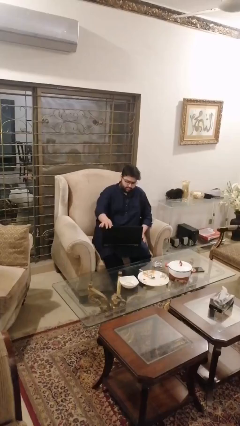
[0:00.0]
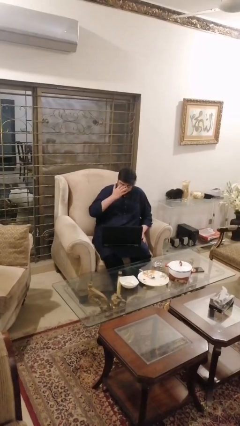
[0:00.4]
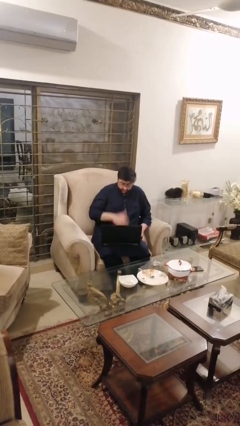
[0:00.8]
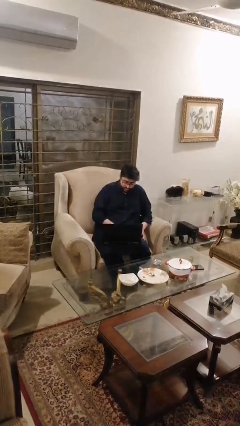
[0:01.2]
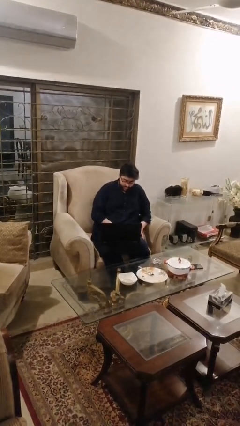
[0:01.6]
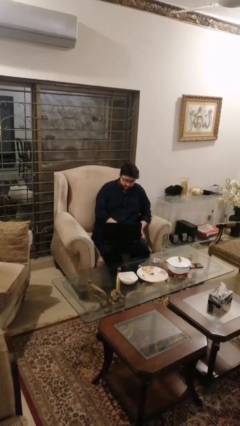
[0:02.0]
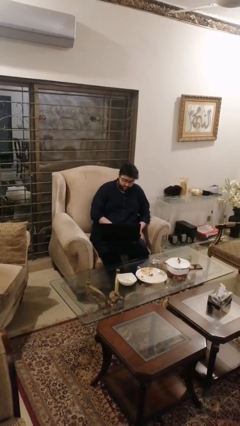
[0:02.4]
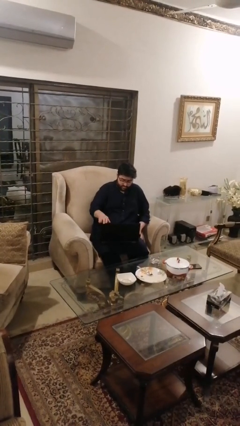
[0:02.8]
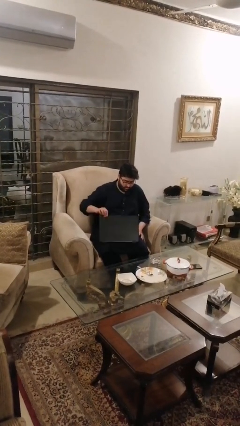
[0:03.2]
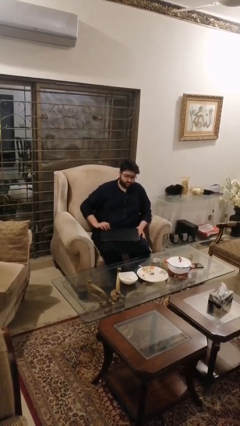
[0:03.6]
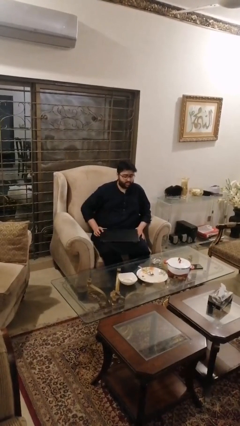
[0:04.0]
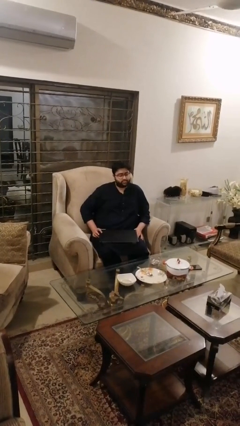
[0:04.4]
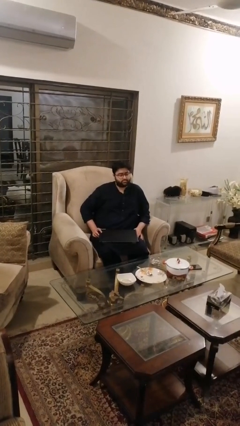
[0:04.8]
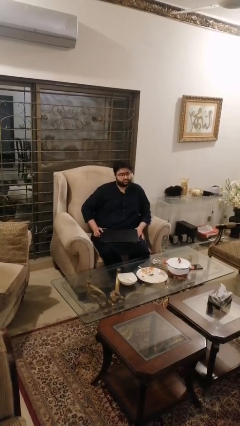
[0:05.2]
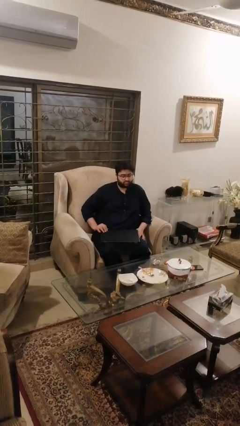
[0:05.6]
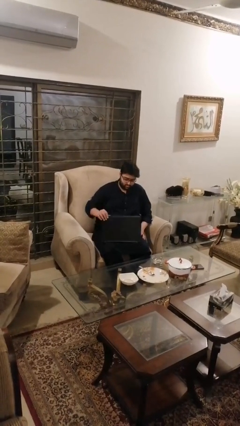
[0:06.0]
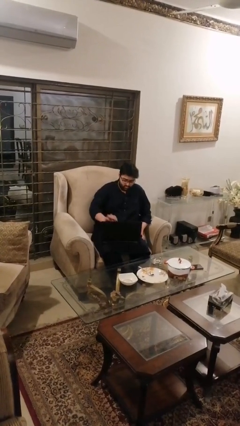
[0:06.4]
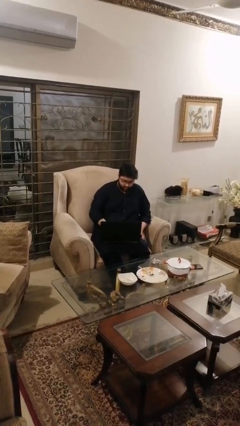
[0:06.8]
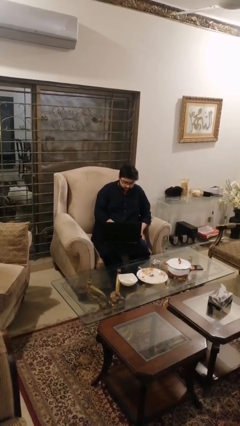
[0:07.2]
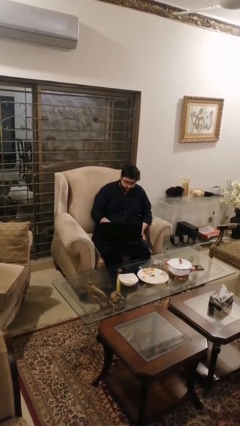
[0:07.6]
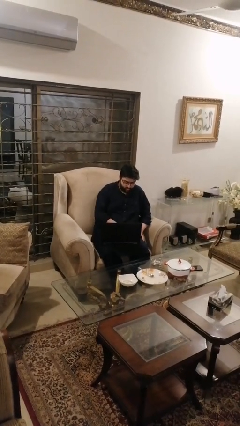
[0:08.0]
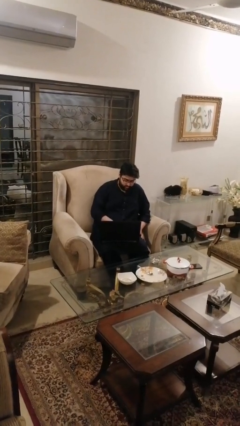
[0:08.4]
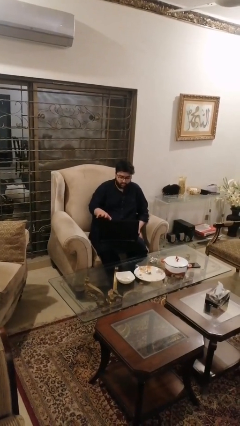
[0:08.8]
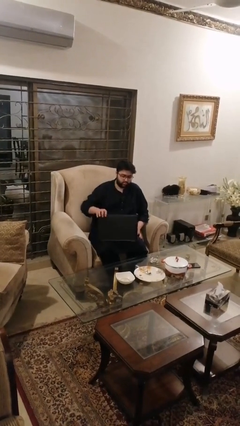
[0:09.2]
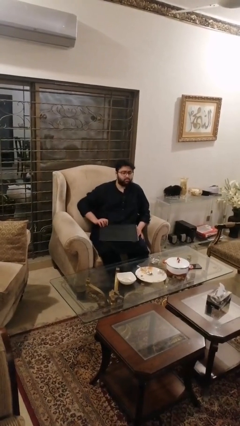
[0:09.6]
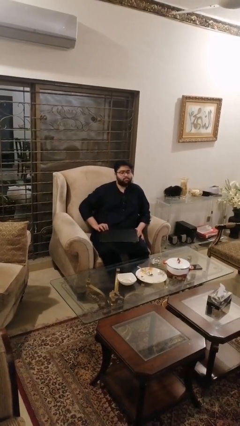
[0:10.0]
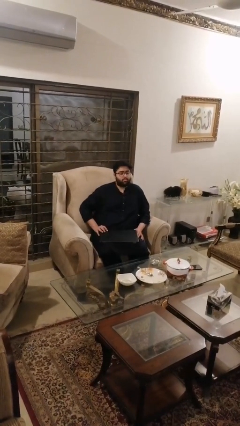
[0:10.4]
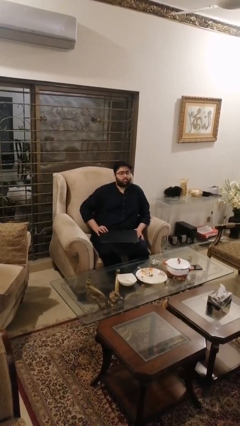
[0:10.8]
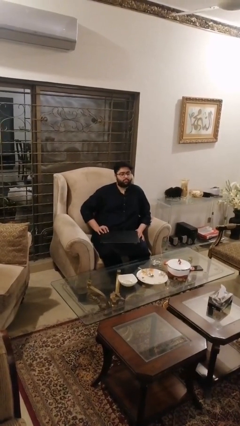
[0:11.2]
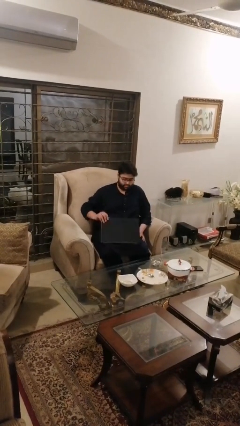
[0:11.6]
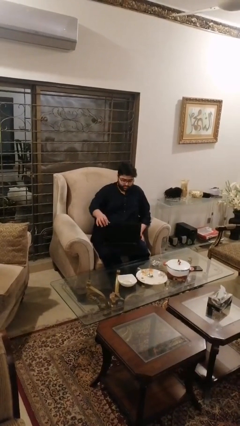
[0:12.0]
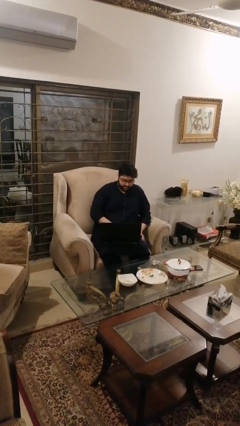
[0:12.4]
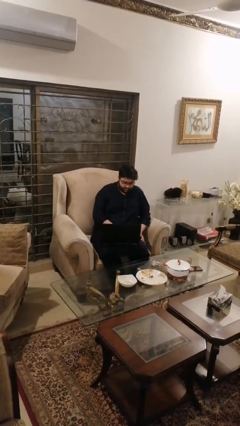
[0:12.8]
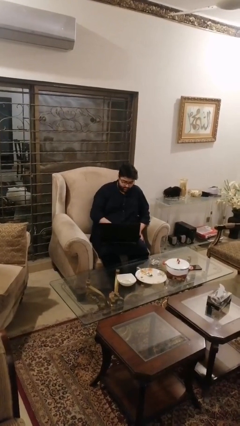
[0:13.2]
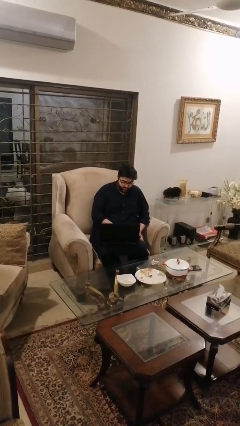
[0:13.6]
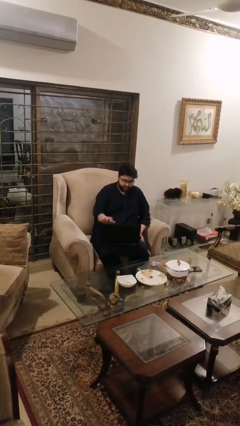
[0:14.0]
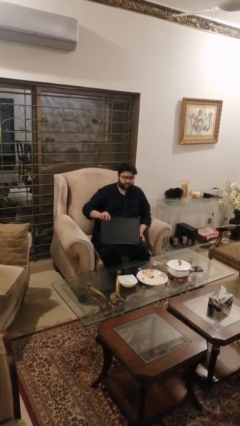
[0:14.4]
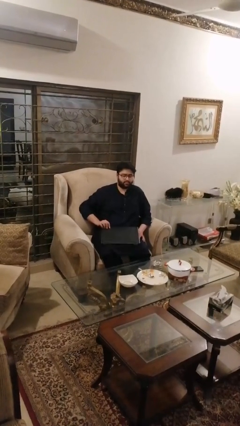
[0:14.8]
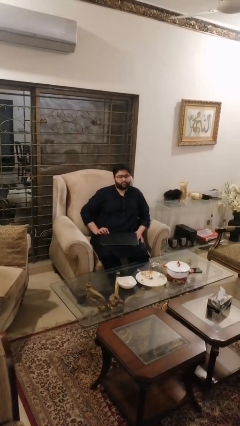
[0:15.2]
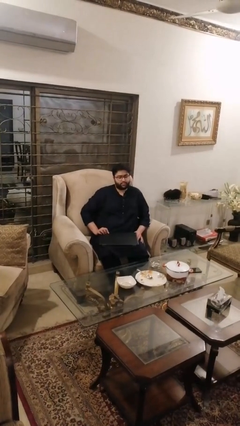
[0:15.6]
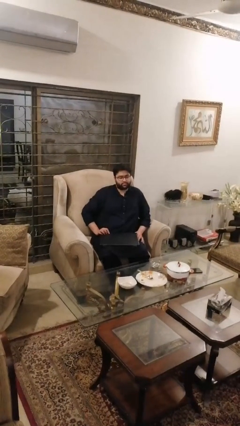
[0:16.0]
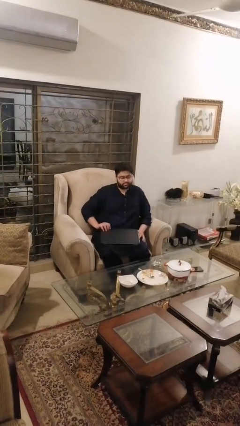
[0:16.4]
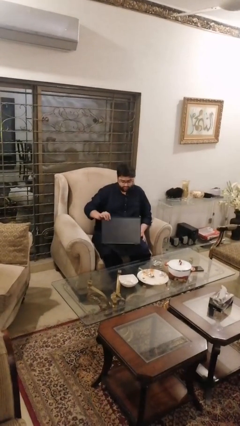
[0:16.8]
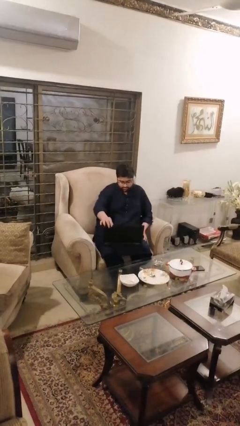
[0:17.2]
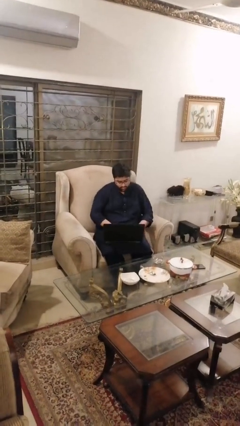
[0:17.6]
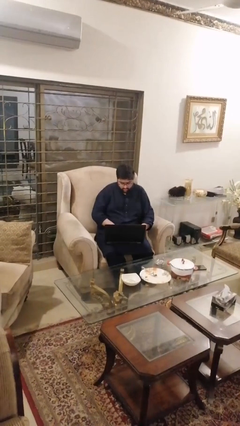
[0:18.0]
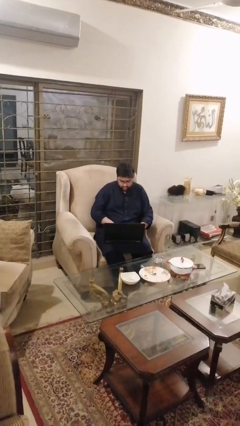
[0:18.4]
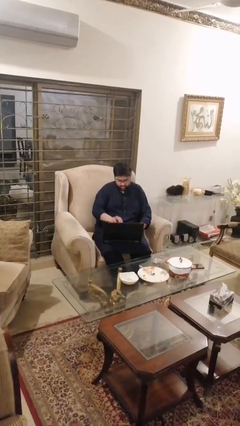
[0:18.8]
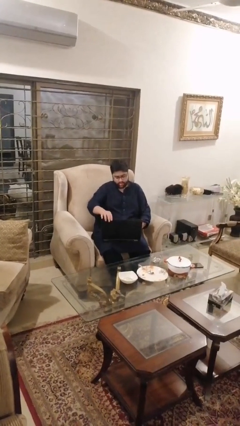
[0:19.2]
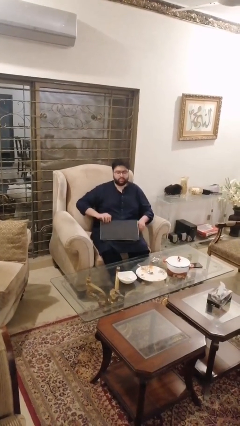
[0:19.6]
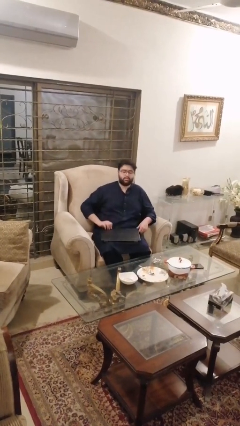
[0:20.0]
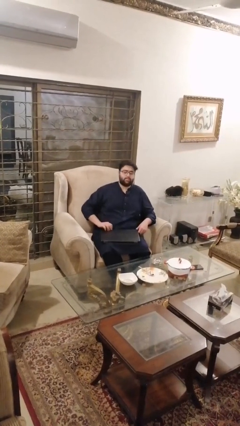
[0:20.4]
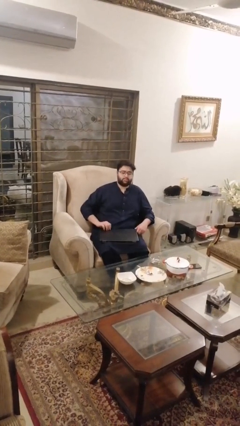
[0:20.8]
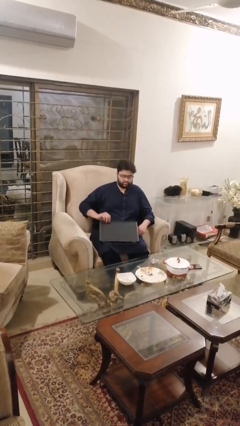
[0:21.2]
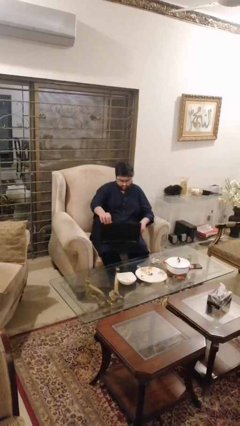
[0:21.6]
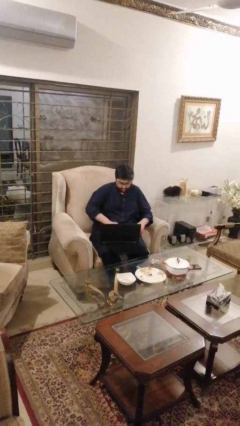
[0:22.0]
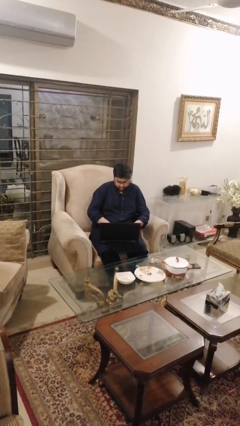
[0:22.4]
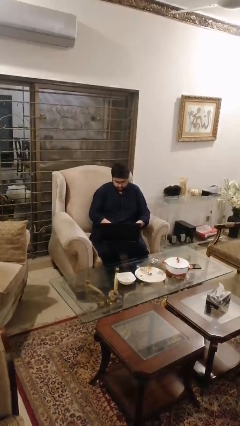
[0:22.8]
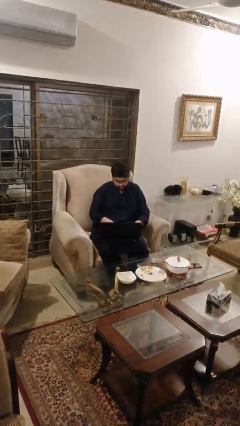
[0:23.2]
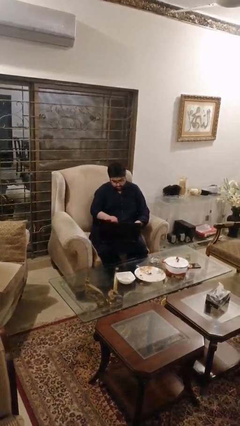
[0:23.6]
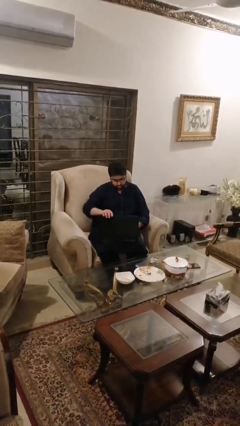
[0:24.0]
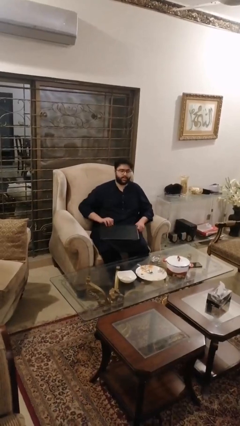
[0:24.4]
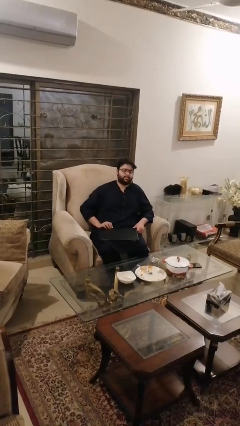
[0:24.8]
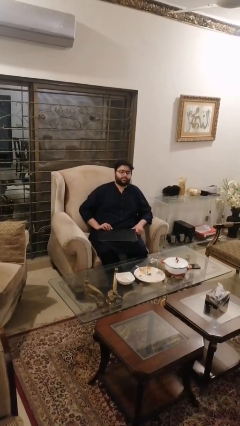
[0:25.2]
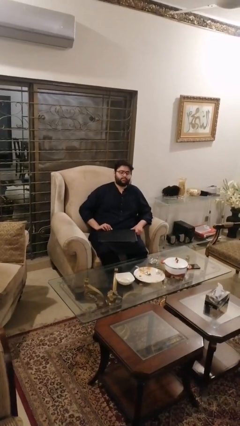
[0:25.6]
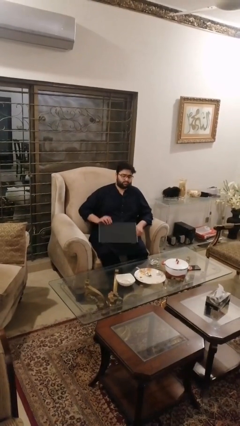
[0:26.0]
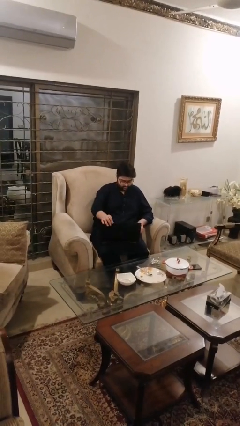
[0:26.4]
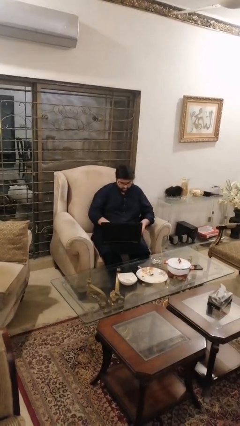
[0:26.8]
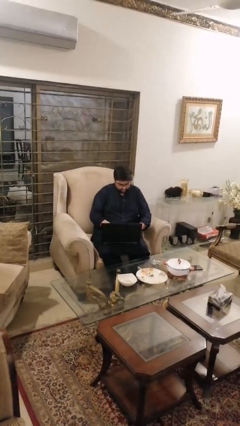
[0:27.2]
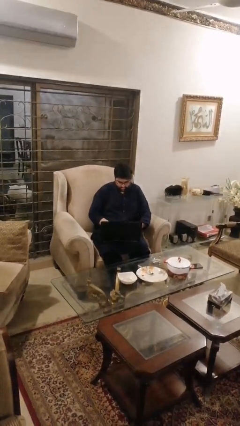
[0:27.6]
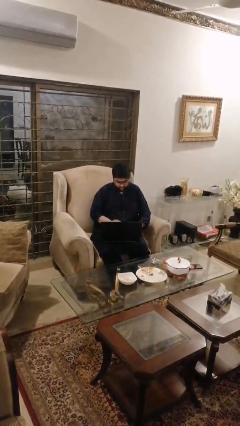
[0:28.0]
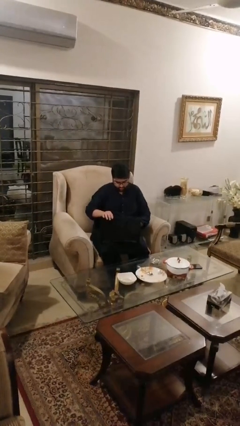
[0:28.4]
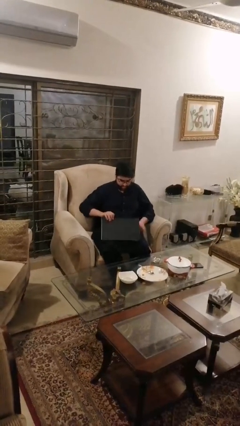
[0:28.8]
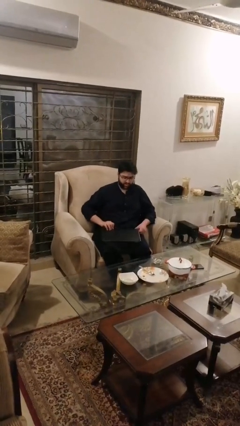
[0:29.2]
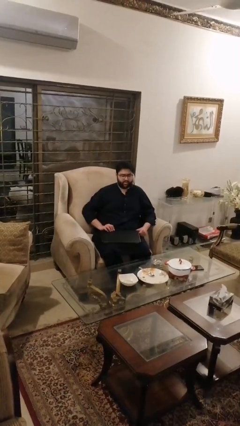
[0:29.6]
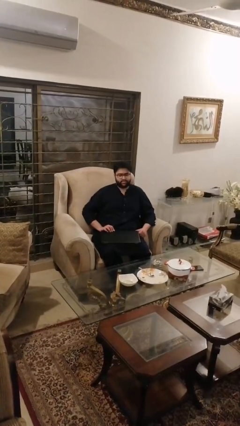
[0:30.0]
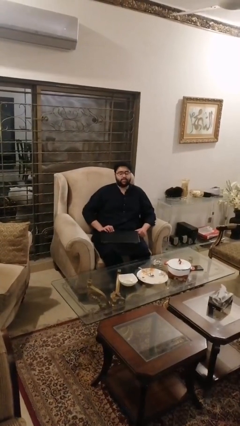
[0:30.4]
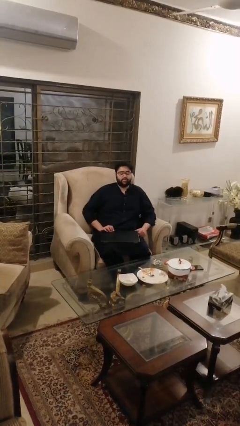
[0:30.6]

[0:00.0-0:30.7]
person interacts with laptop

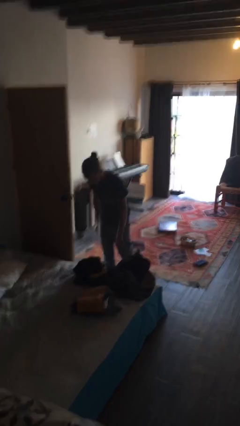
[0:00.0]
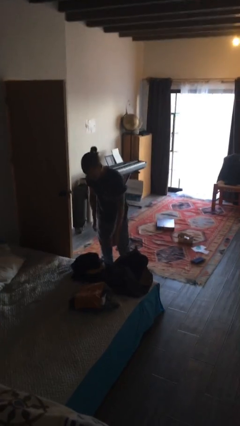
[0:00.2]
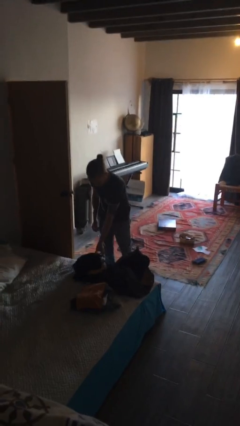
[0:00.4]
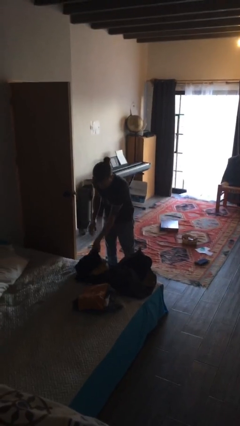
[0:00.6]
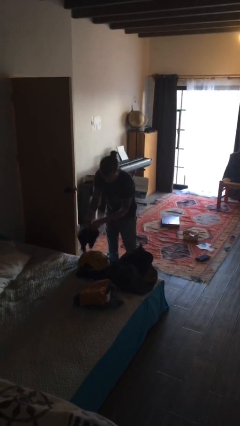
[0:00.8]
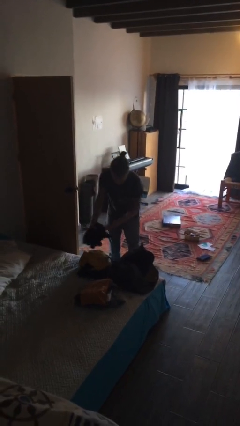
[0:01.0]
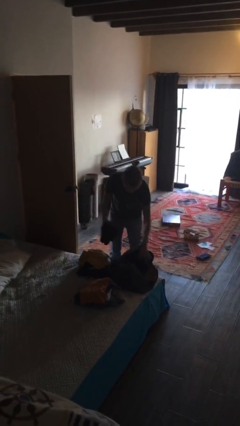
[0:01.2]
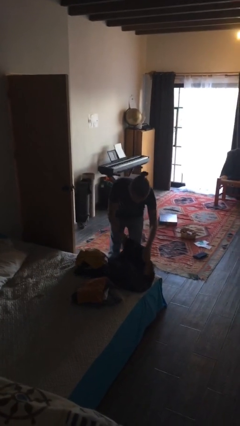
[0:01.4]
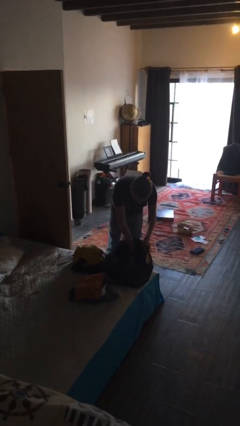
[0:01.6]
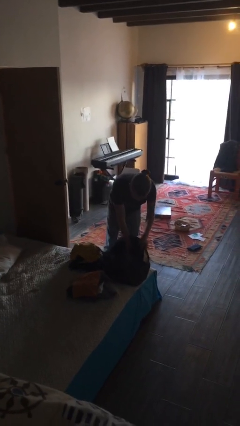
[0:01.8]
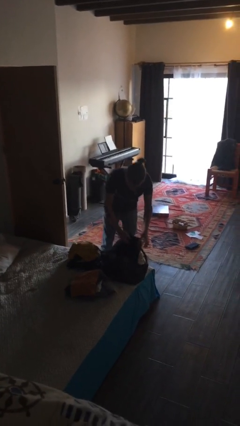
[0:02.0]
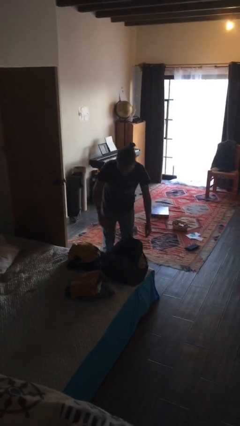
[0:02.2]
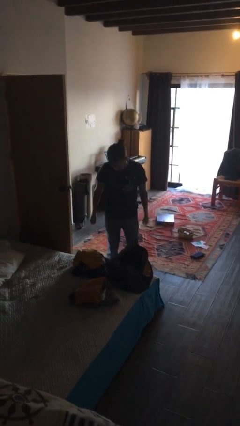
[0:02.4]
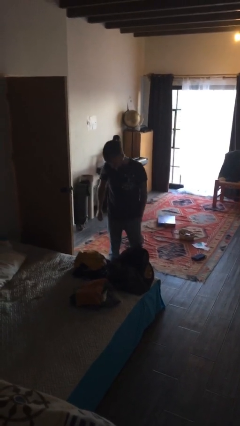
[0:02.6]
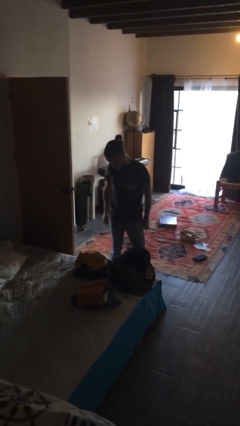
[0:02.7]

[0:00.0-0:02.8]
person loads clothes into suitcase

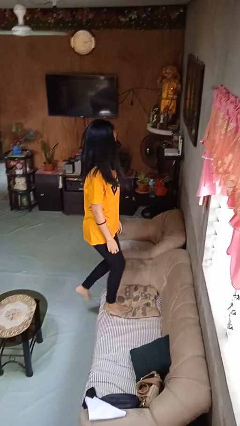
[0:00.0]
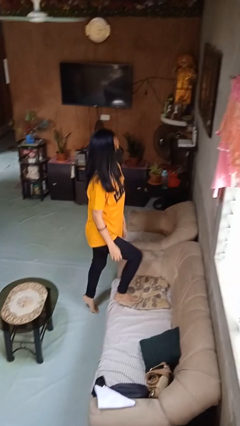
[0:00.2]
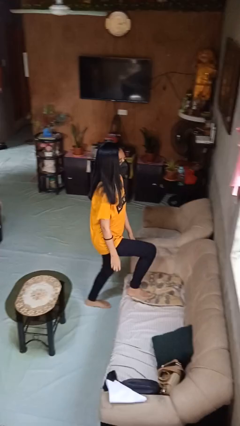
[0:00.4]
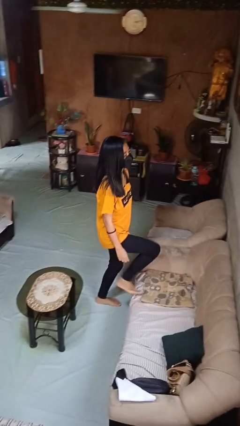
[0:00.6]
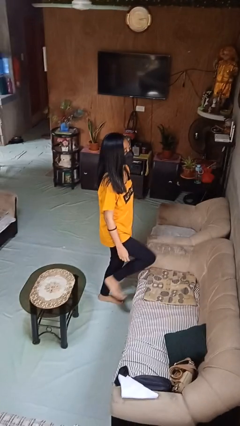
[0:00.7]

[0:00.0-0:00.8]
person climbs off couch
